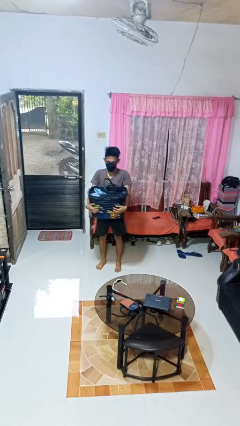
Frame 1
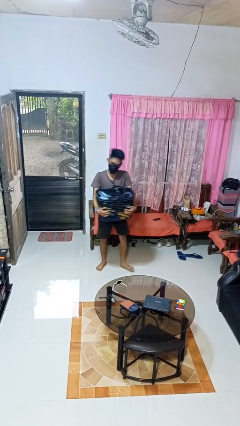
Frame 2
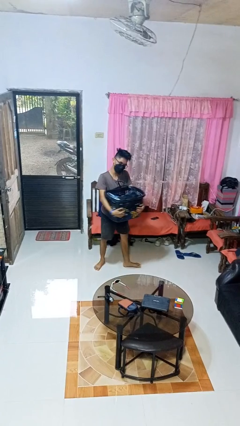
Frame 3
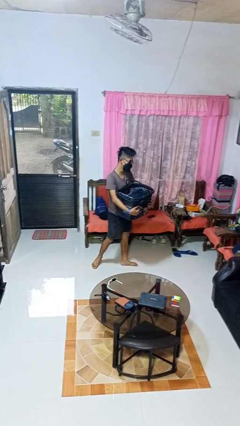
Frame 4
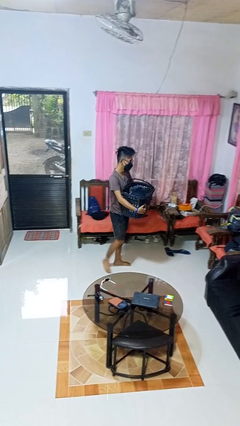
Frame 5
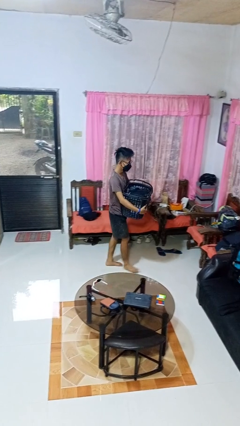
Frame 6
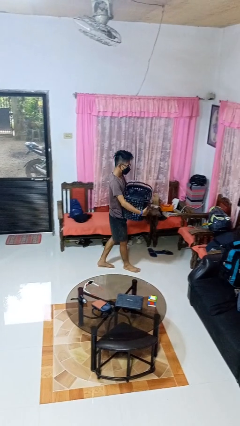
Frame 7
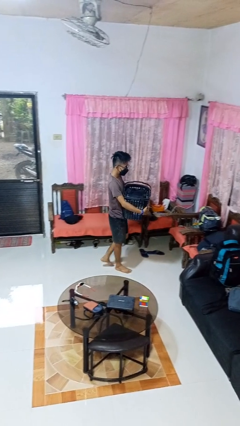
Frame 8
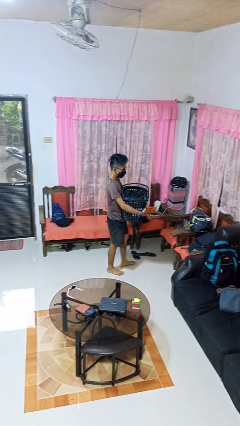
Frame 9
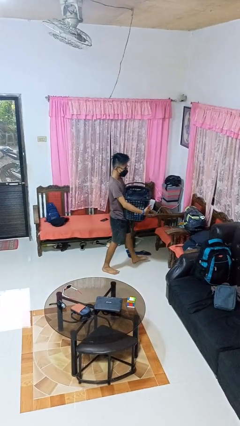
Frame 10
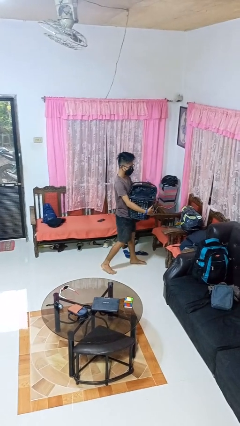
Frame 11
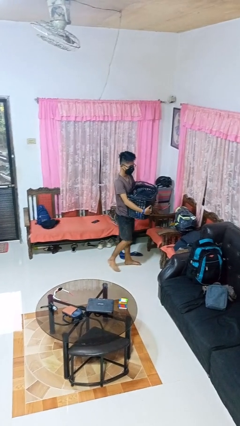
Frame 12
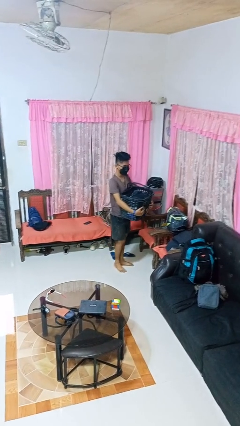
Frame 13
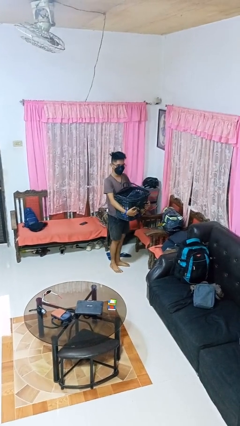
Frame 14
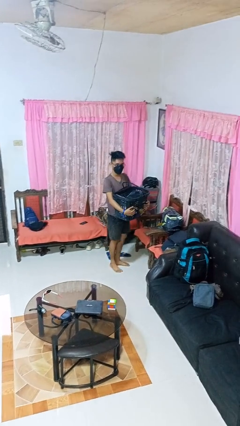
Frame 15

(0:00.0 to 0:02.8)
person carries laundry basket

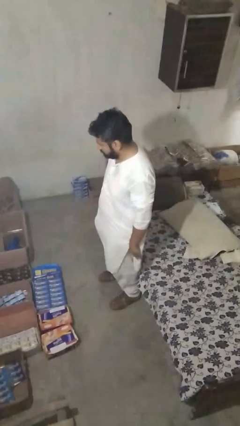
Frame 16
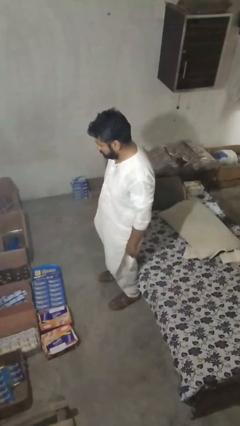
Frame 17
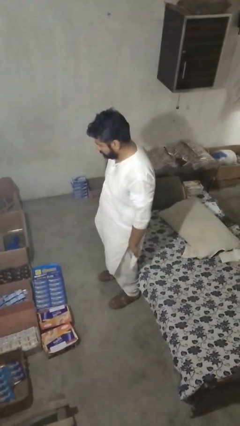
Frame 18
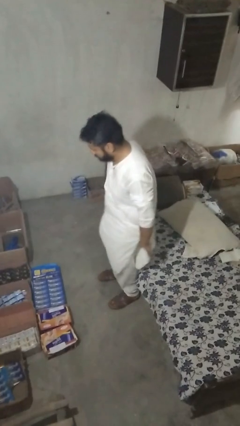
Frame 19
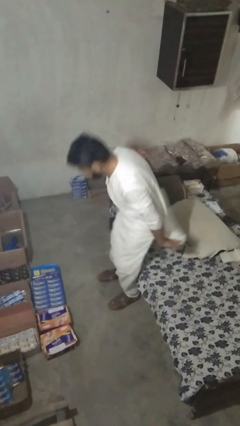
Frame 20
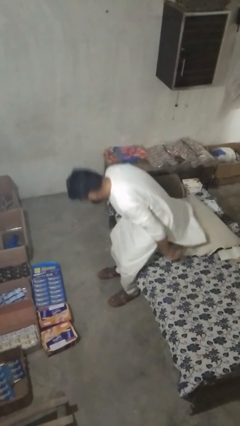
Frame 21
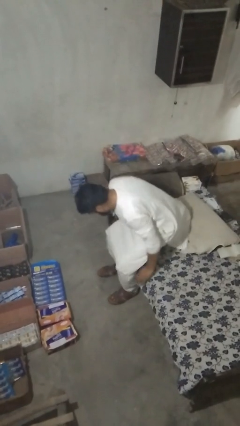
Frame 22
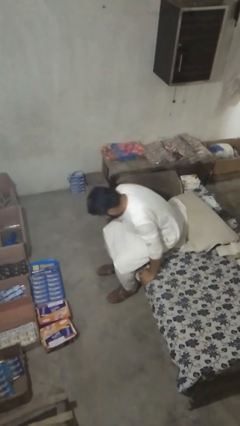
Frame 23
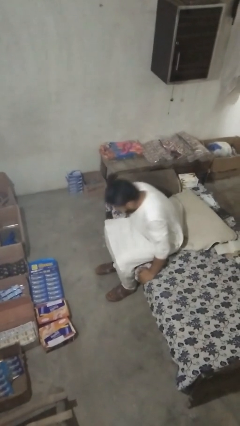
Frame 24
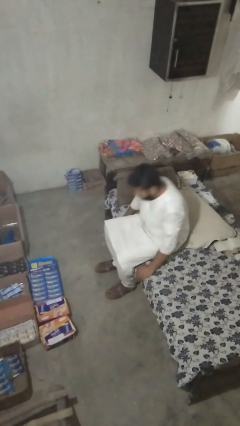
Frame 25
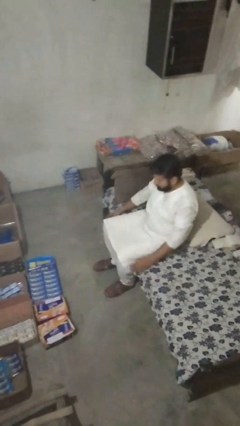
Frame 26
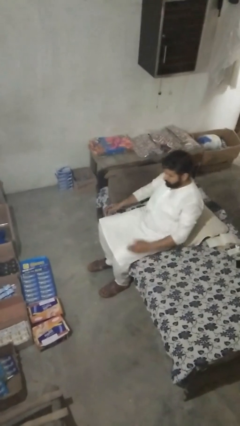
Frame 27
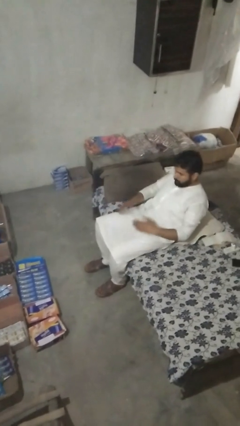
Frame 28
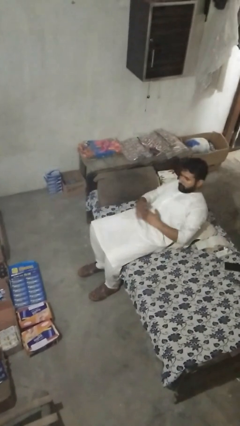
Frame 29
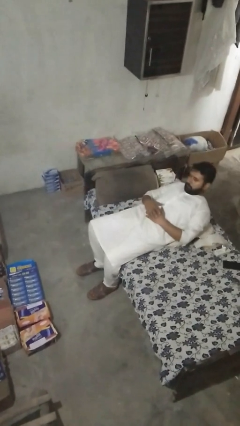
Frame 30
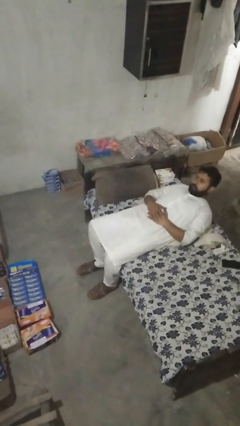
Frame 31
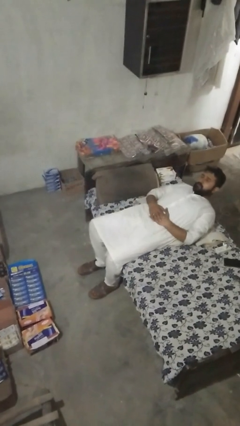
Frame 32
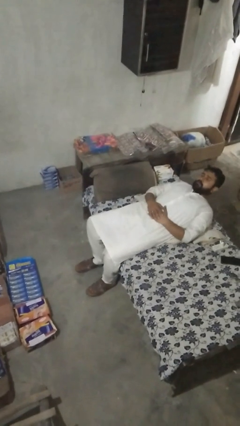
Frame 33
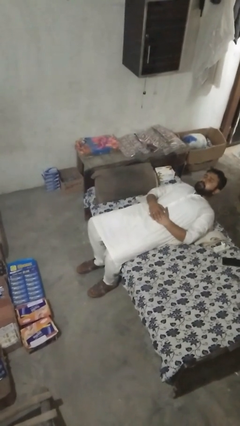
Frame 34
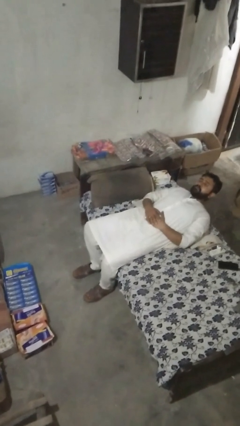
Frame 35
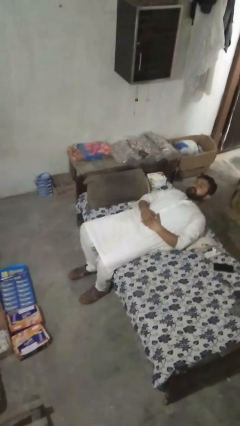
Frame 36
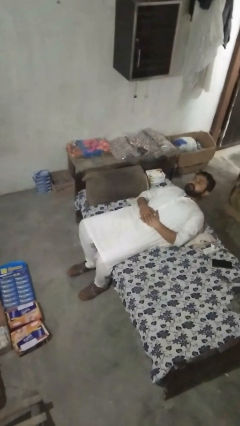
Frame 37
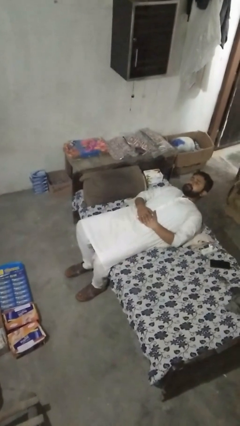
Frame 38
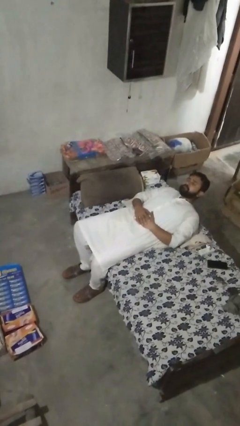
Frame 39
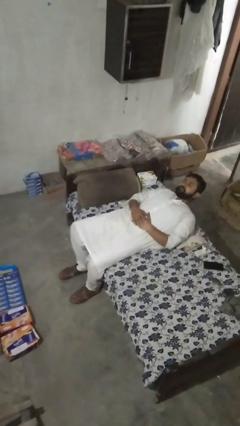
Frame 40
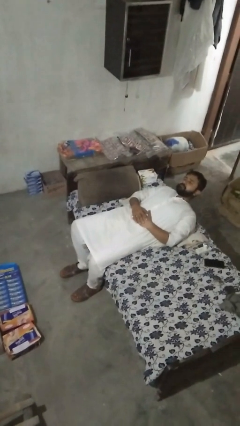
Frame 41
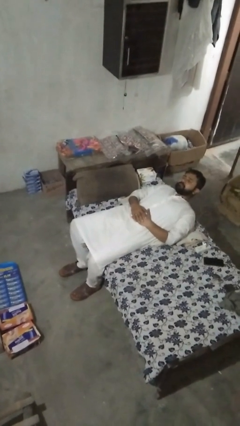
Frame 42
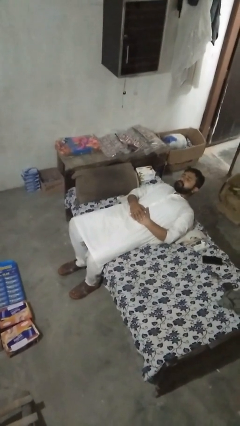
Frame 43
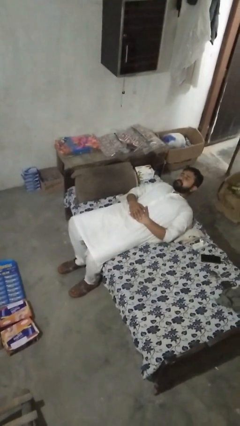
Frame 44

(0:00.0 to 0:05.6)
person lies down on couch

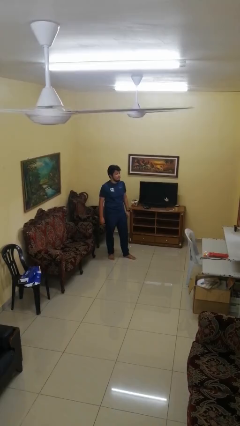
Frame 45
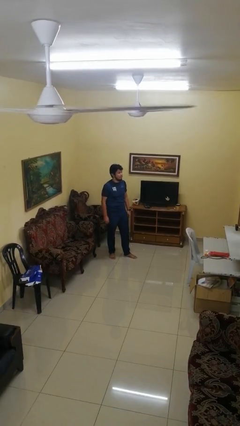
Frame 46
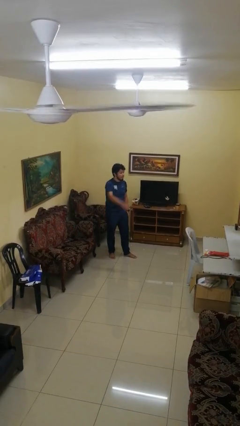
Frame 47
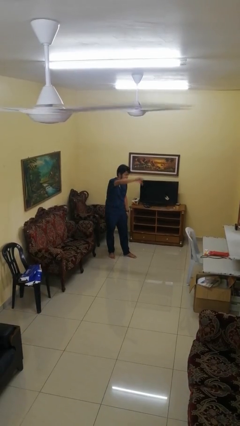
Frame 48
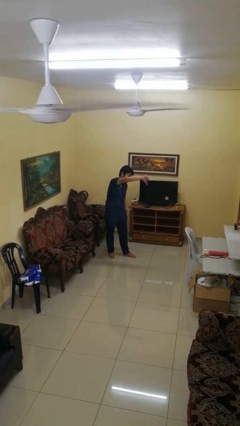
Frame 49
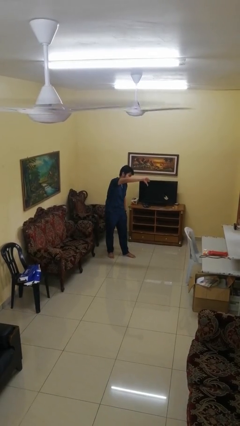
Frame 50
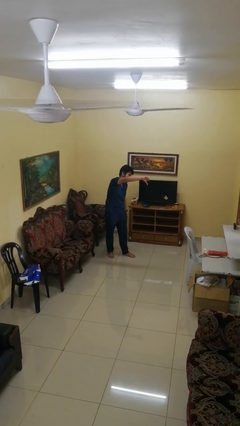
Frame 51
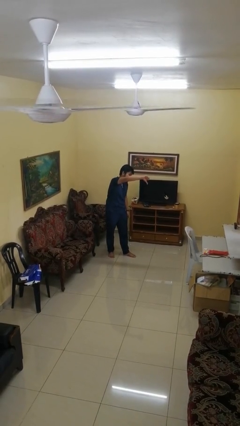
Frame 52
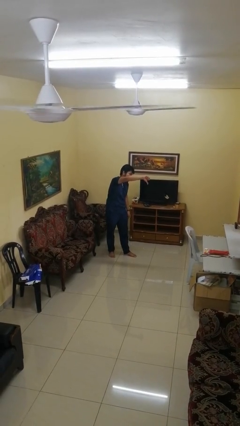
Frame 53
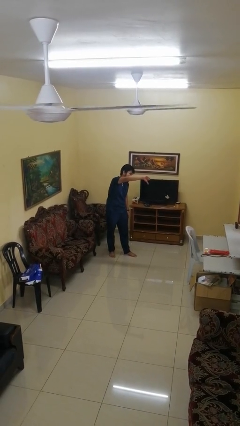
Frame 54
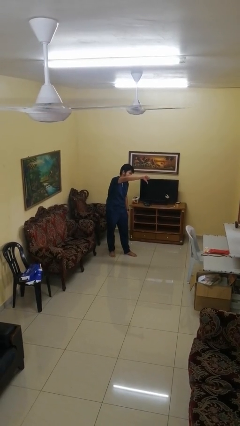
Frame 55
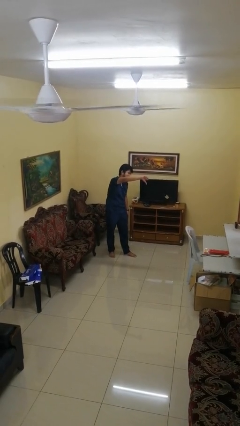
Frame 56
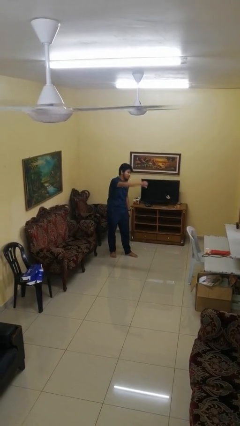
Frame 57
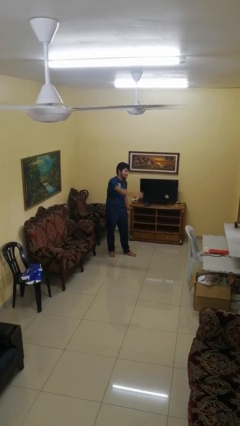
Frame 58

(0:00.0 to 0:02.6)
person gestures thumbs down

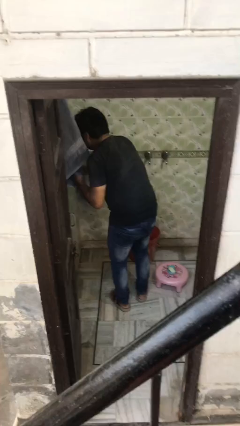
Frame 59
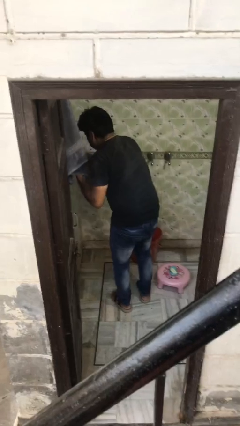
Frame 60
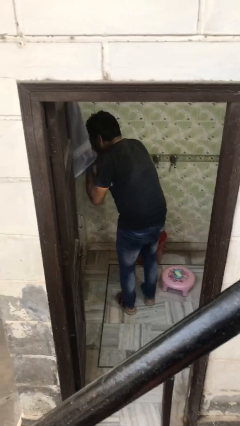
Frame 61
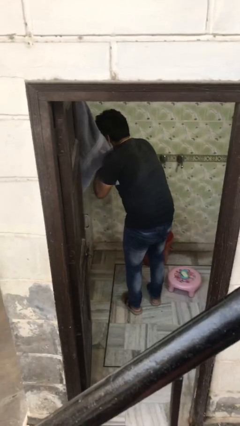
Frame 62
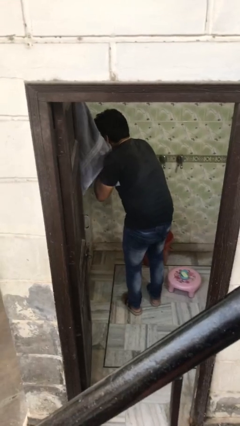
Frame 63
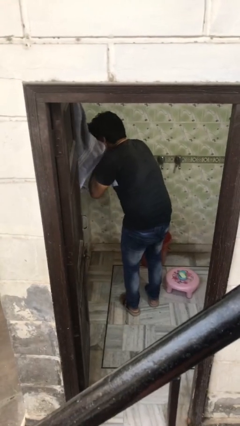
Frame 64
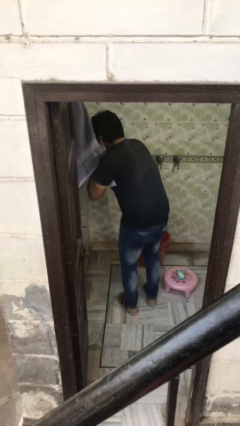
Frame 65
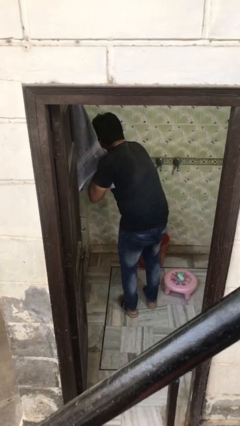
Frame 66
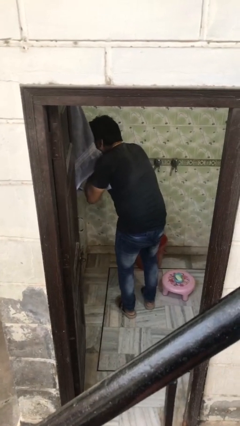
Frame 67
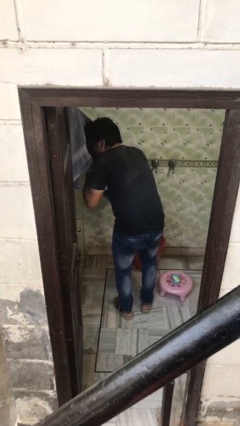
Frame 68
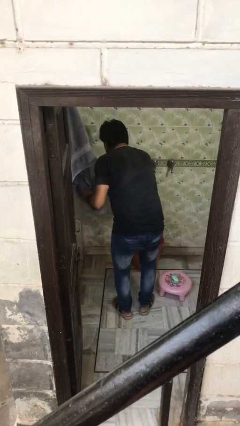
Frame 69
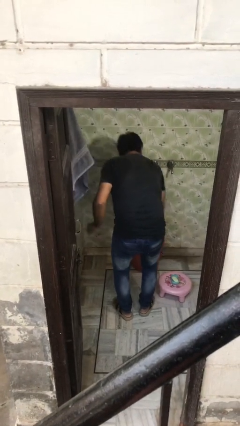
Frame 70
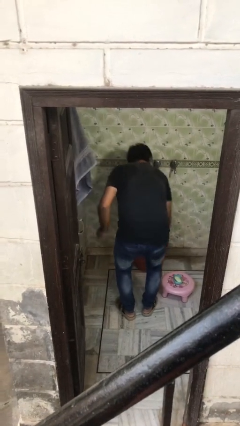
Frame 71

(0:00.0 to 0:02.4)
person dries face with towel

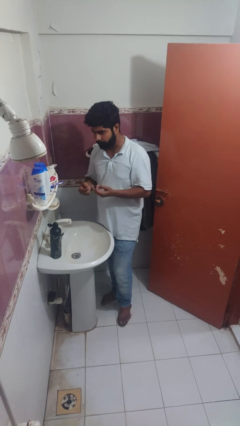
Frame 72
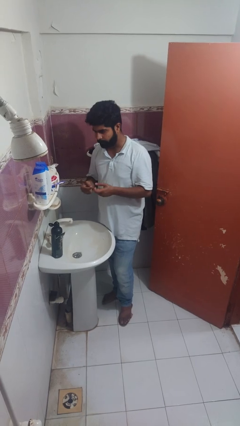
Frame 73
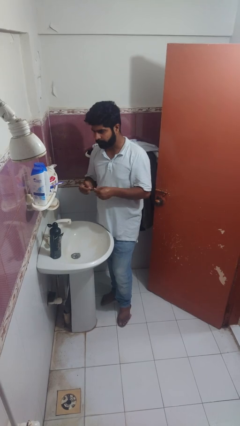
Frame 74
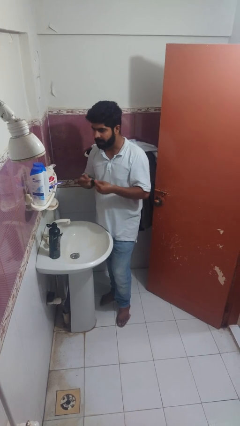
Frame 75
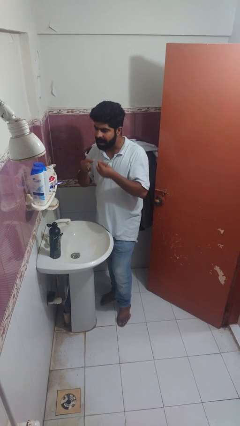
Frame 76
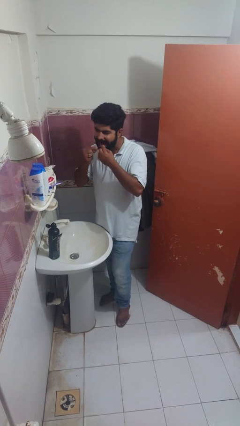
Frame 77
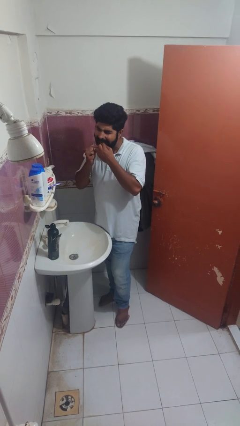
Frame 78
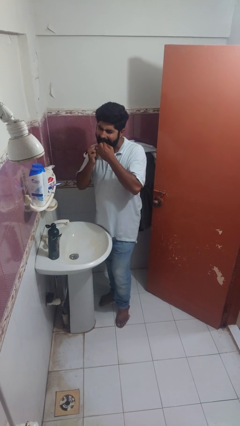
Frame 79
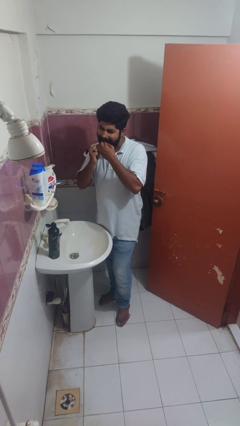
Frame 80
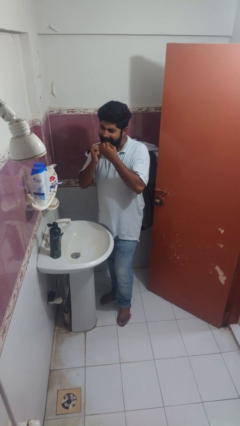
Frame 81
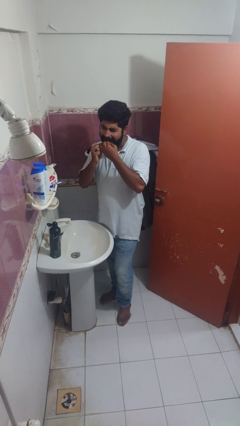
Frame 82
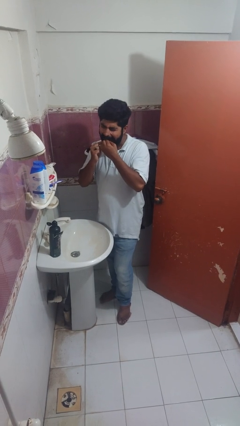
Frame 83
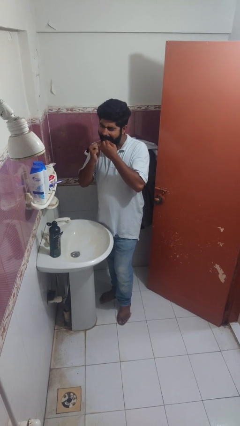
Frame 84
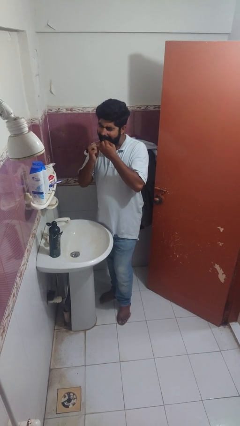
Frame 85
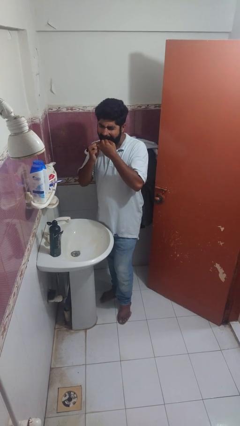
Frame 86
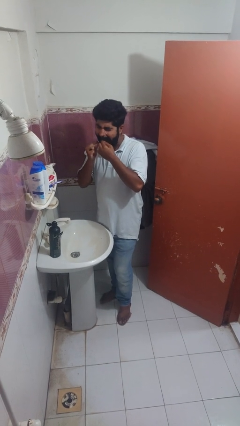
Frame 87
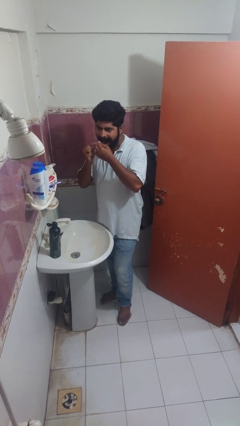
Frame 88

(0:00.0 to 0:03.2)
person flosses

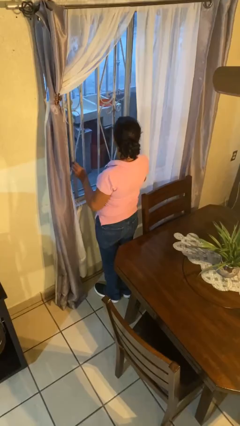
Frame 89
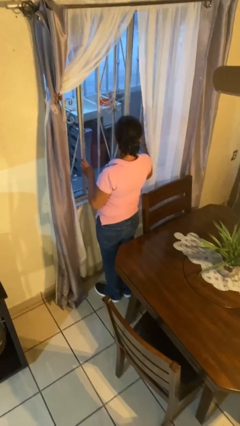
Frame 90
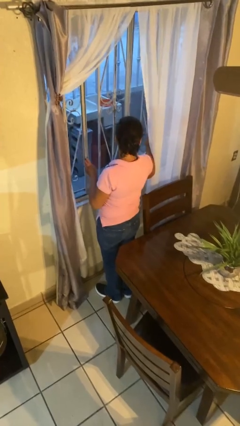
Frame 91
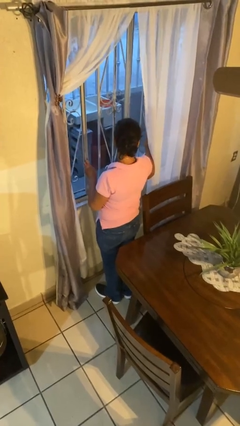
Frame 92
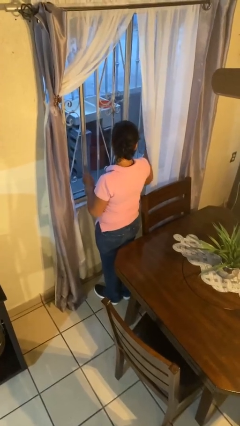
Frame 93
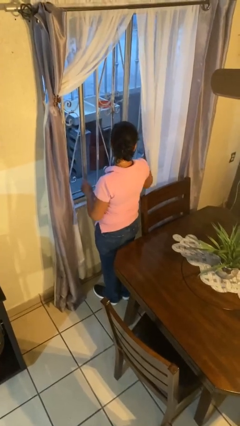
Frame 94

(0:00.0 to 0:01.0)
person opens home window
